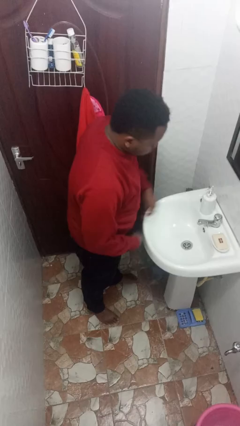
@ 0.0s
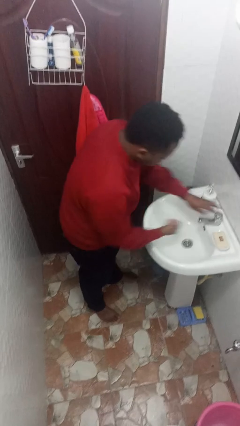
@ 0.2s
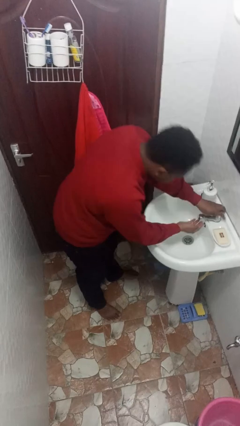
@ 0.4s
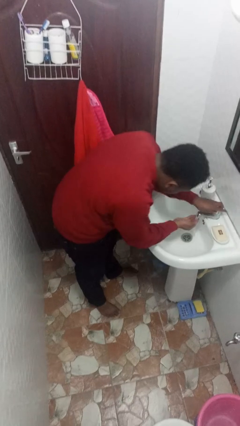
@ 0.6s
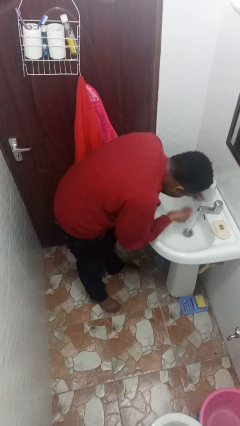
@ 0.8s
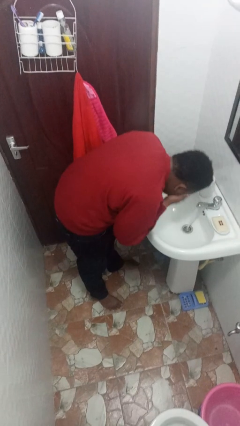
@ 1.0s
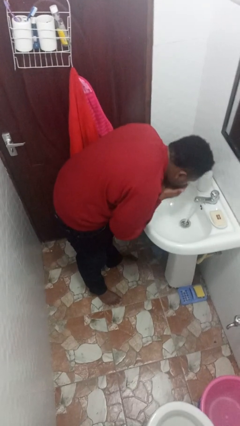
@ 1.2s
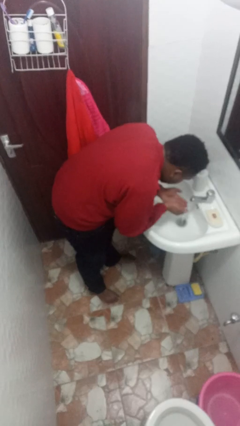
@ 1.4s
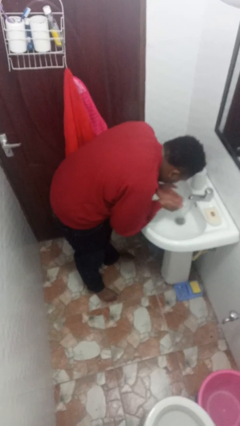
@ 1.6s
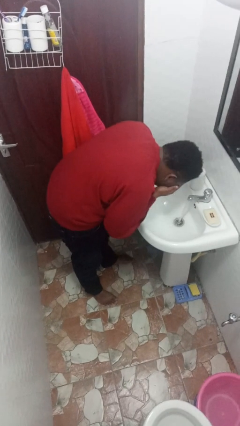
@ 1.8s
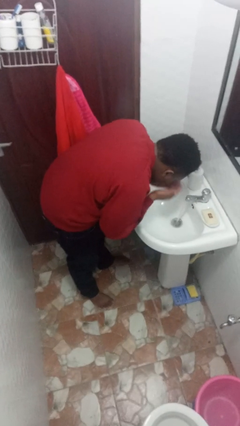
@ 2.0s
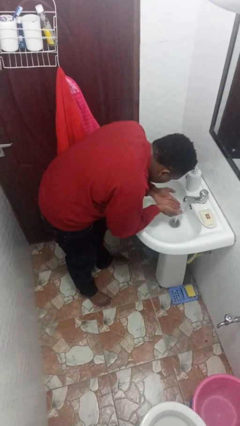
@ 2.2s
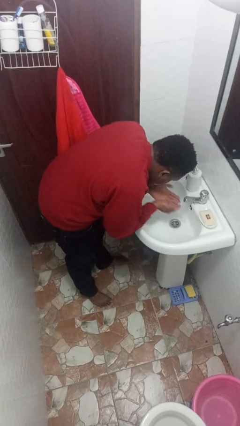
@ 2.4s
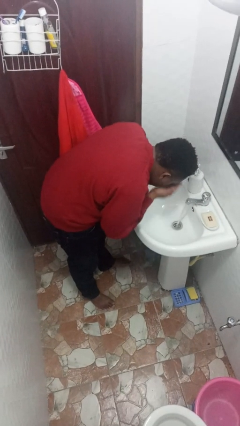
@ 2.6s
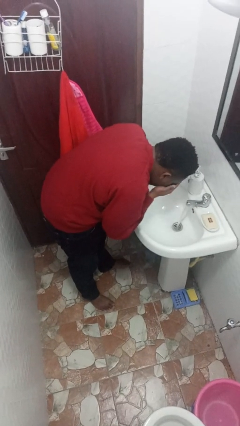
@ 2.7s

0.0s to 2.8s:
person washes face

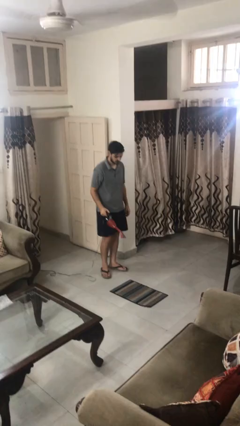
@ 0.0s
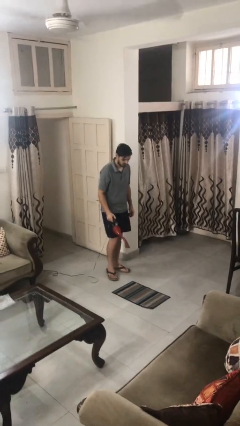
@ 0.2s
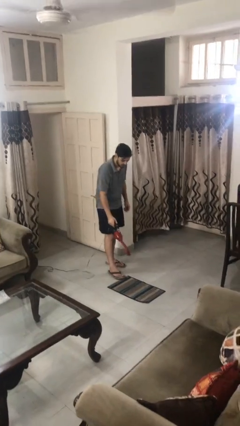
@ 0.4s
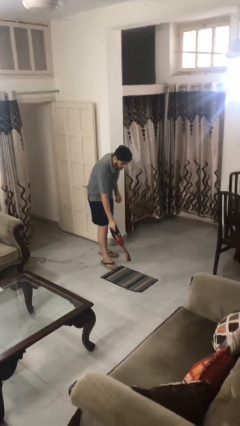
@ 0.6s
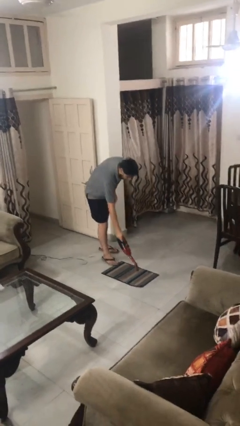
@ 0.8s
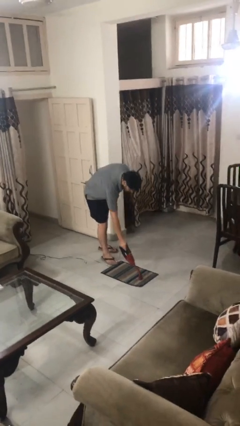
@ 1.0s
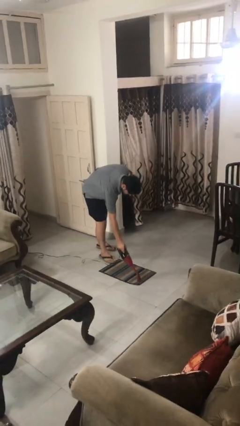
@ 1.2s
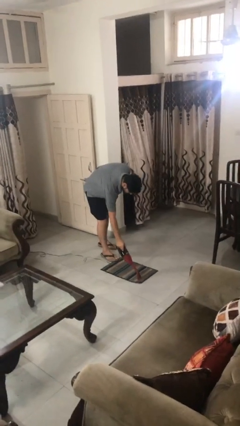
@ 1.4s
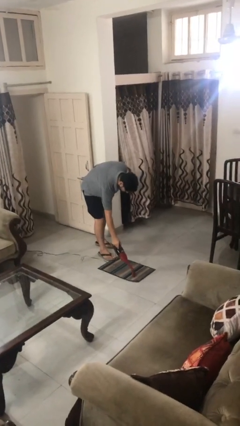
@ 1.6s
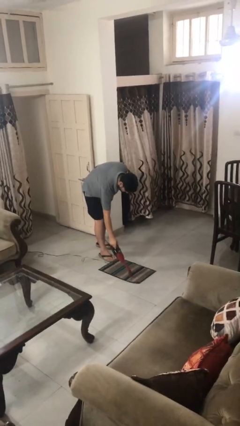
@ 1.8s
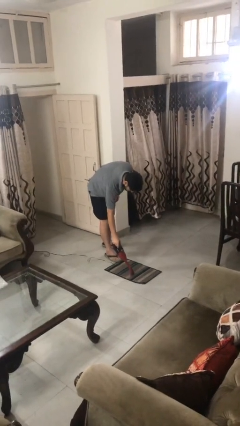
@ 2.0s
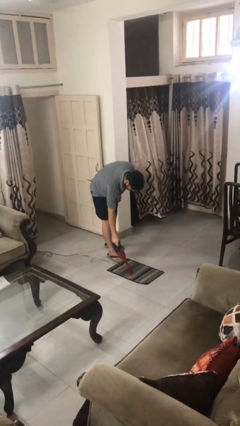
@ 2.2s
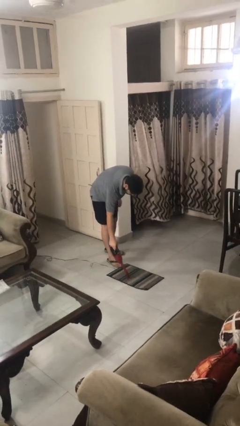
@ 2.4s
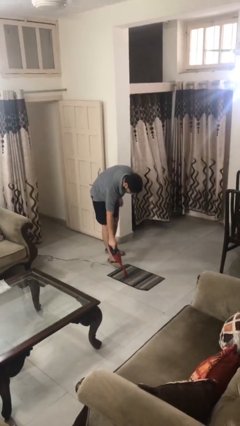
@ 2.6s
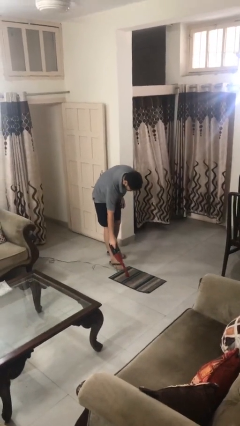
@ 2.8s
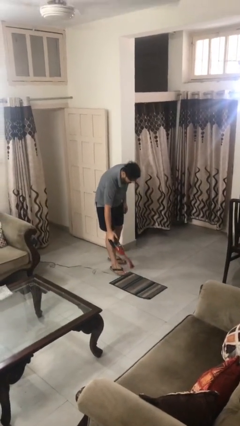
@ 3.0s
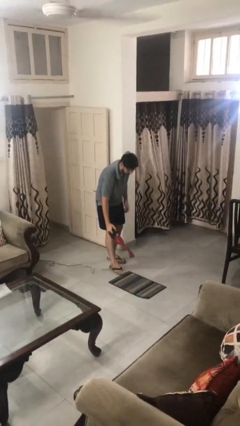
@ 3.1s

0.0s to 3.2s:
person vacuums carpet

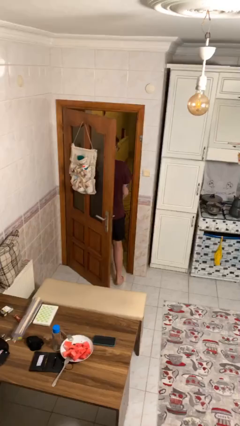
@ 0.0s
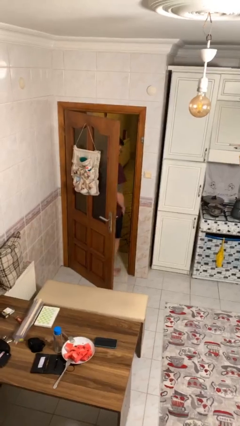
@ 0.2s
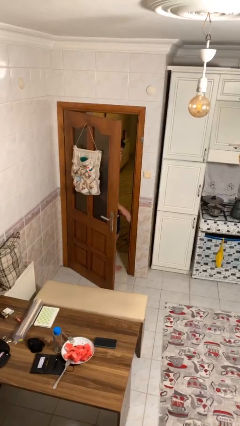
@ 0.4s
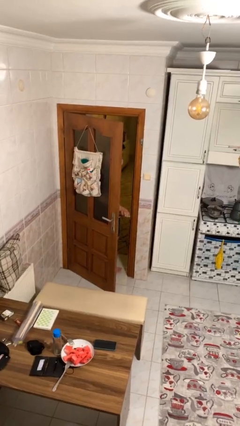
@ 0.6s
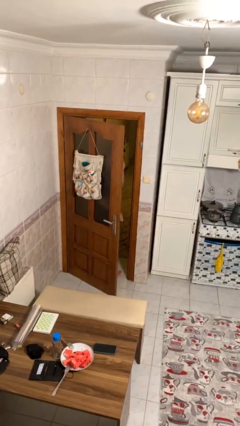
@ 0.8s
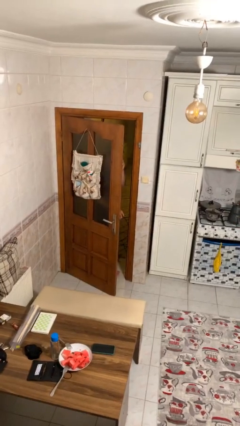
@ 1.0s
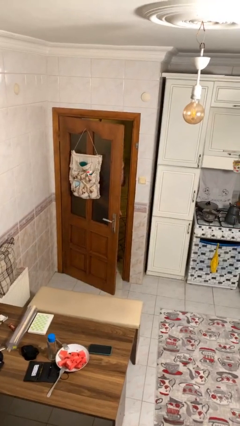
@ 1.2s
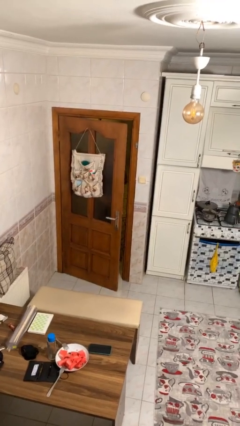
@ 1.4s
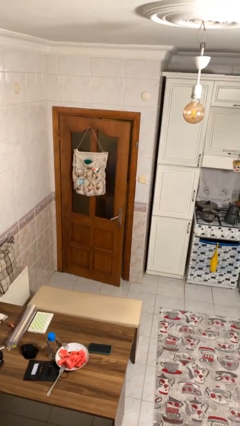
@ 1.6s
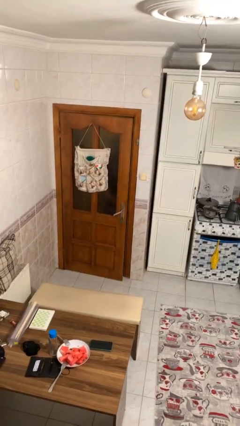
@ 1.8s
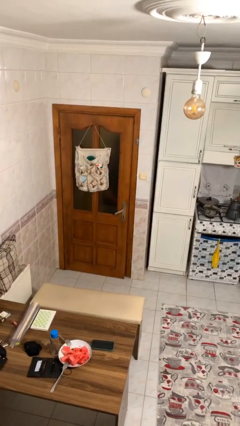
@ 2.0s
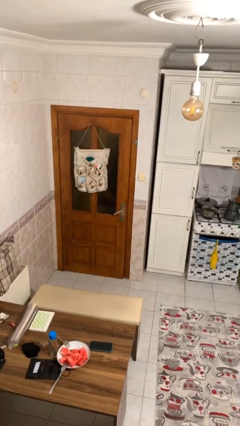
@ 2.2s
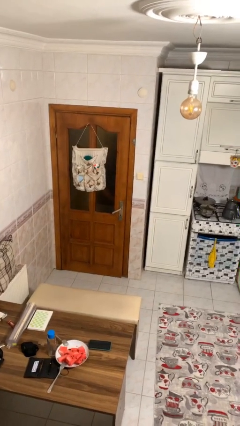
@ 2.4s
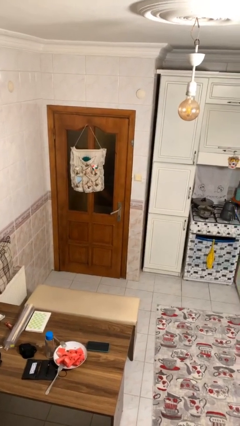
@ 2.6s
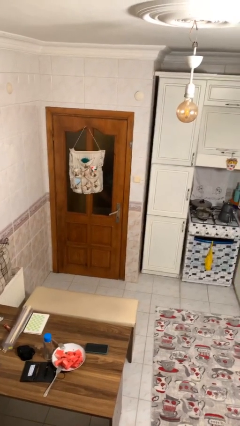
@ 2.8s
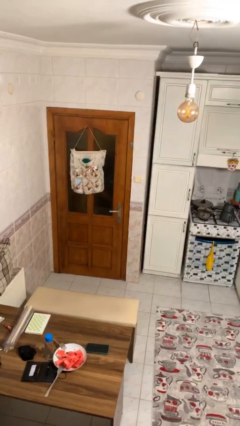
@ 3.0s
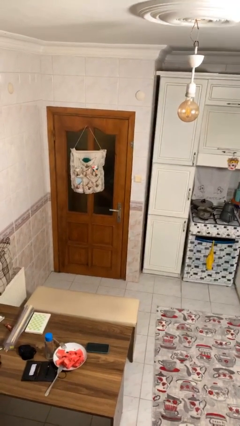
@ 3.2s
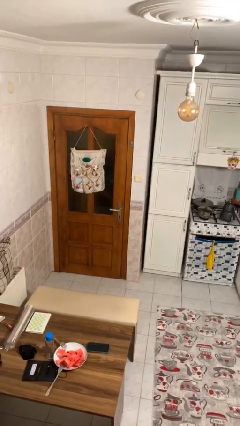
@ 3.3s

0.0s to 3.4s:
person closes facility door

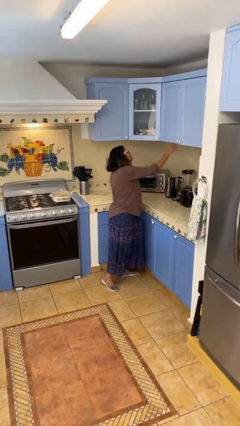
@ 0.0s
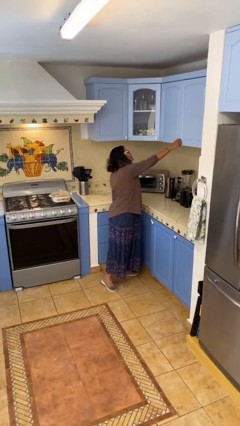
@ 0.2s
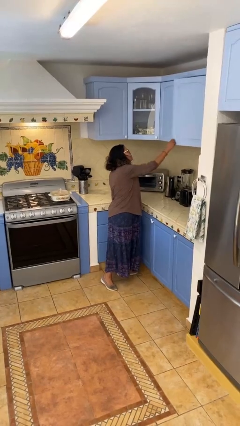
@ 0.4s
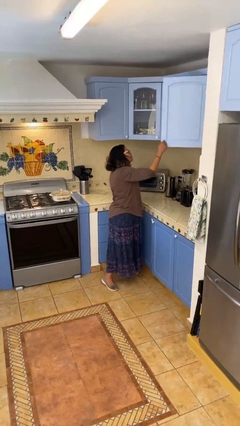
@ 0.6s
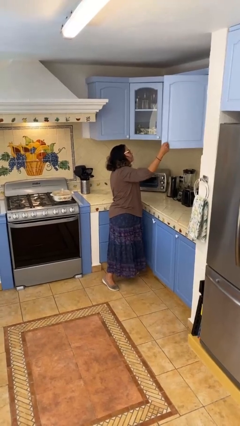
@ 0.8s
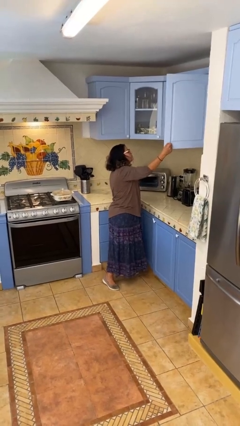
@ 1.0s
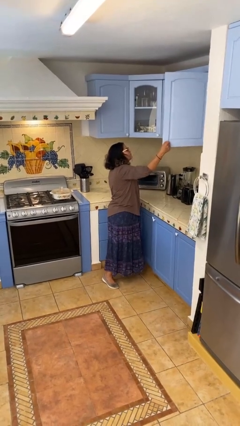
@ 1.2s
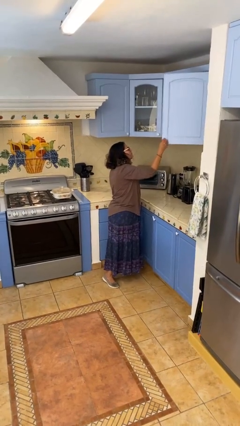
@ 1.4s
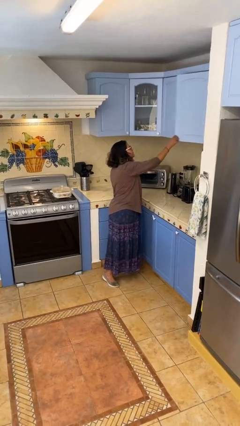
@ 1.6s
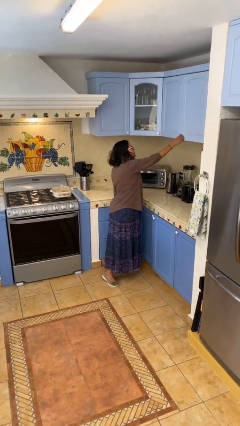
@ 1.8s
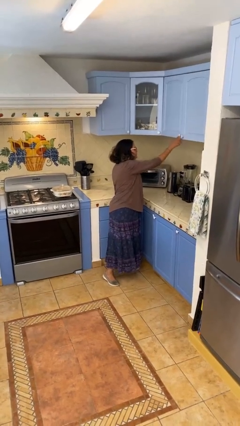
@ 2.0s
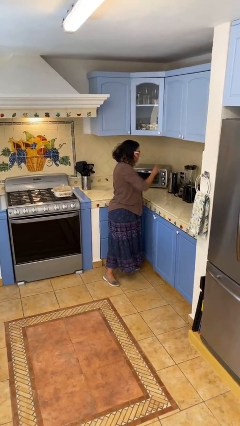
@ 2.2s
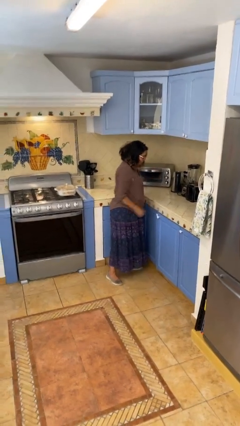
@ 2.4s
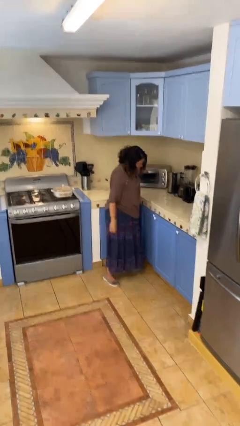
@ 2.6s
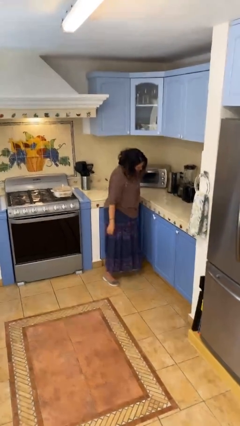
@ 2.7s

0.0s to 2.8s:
person closes cabinet

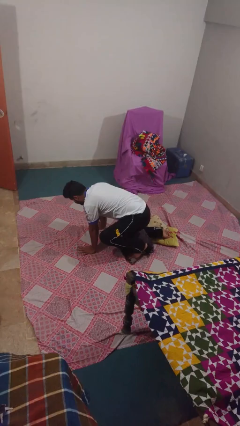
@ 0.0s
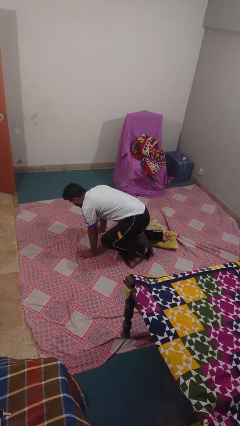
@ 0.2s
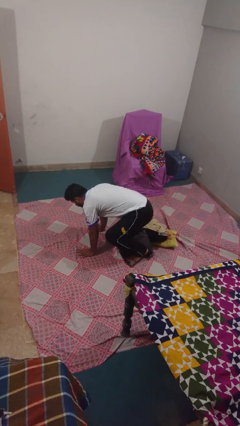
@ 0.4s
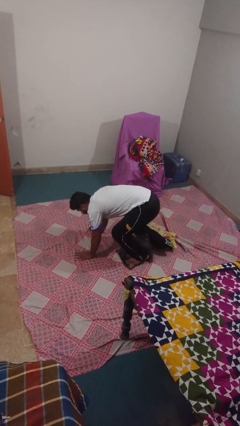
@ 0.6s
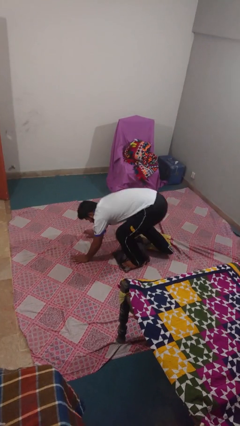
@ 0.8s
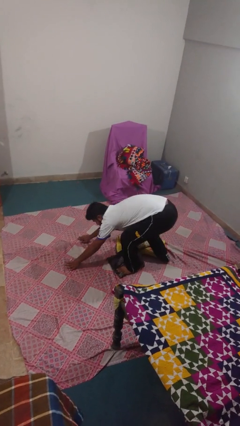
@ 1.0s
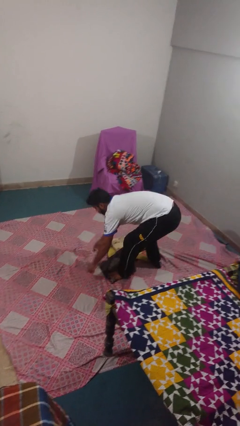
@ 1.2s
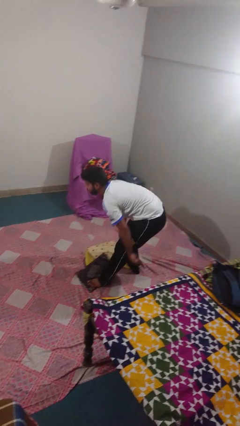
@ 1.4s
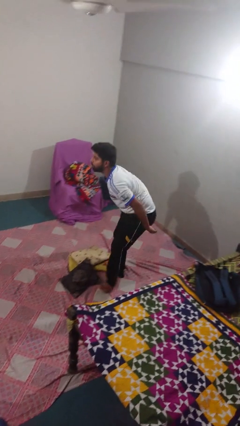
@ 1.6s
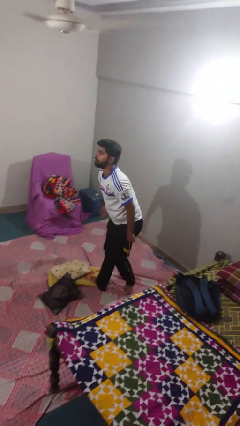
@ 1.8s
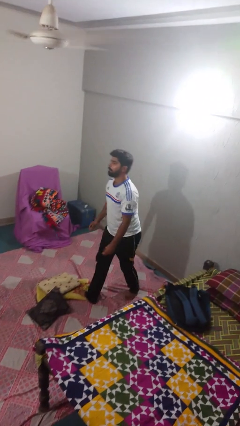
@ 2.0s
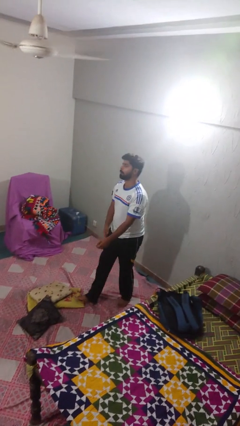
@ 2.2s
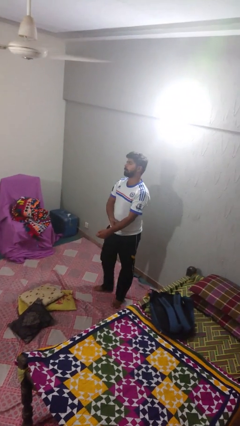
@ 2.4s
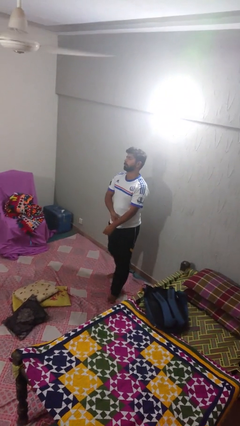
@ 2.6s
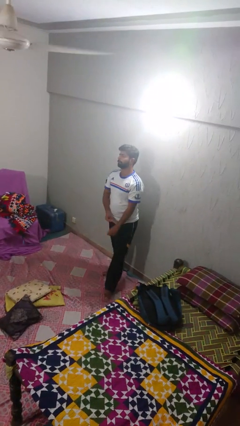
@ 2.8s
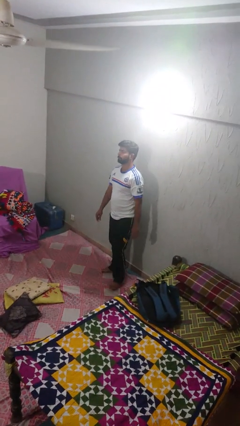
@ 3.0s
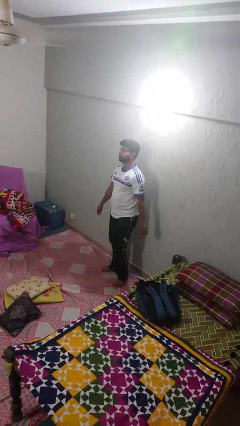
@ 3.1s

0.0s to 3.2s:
person stands up from floor

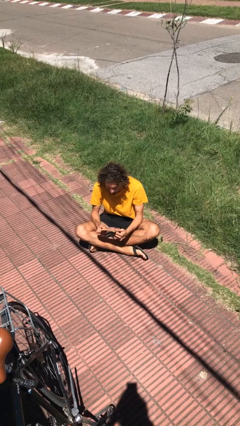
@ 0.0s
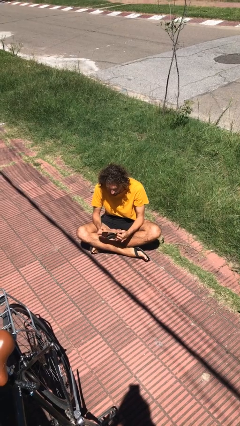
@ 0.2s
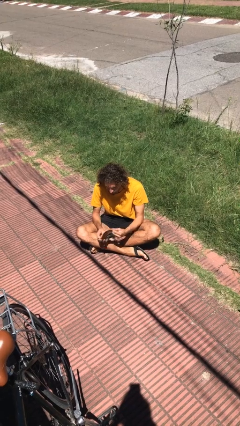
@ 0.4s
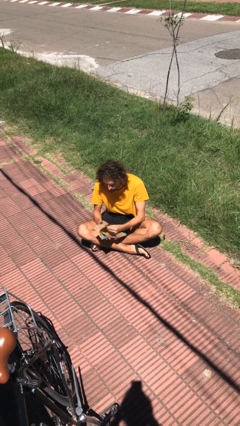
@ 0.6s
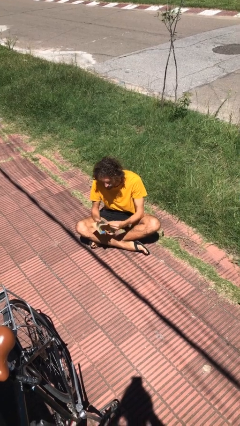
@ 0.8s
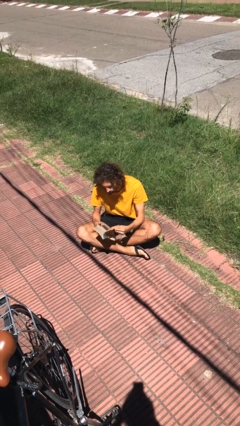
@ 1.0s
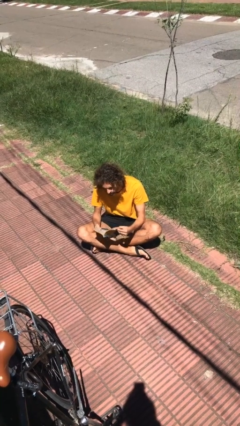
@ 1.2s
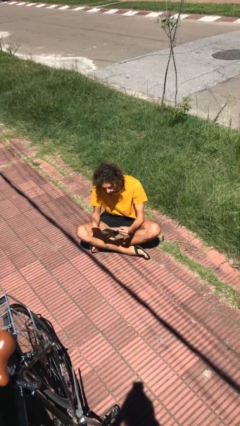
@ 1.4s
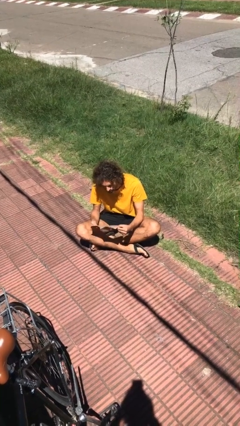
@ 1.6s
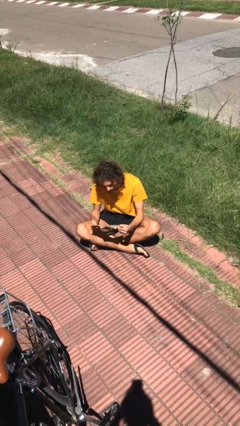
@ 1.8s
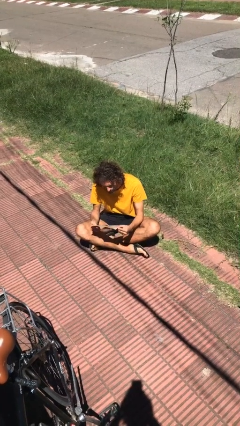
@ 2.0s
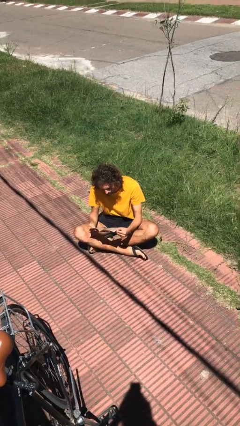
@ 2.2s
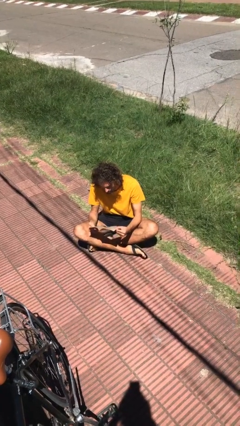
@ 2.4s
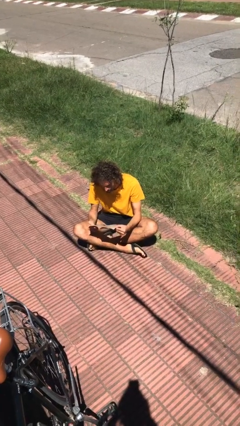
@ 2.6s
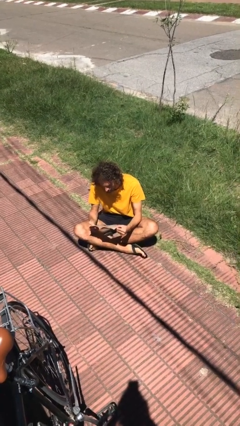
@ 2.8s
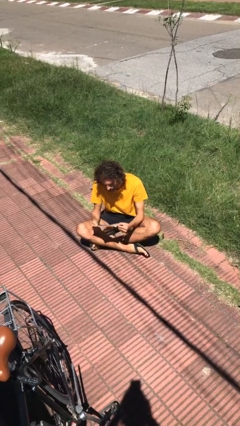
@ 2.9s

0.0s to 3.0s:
person reads document
